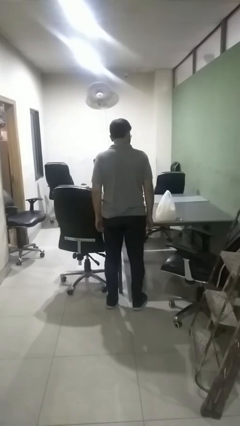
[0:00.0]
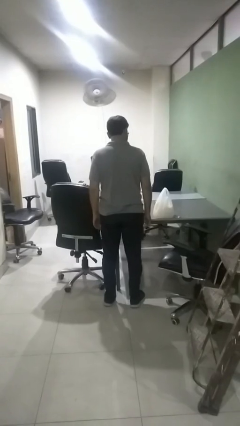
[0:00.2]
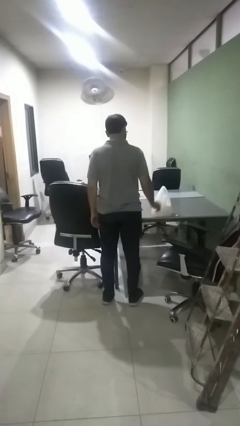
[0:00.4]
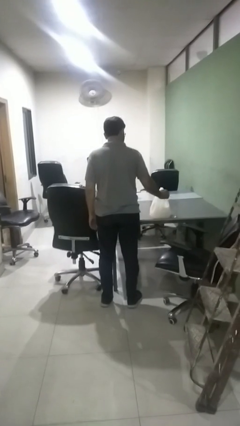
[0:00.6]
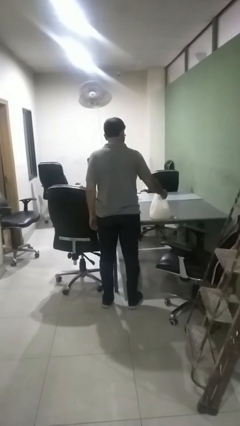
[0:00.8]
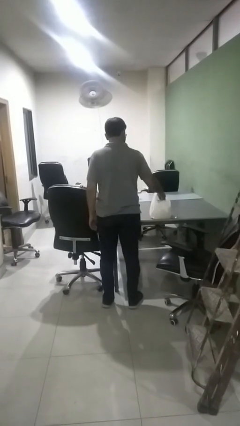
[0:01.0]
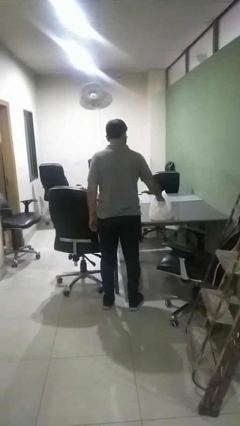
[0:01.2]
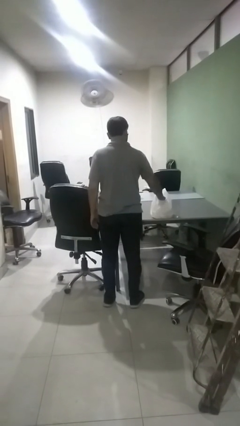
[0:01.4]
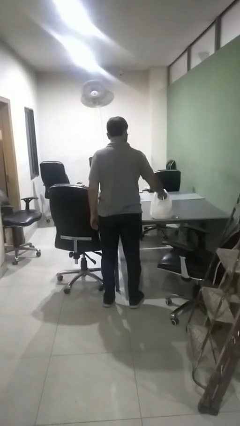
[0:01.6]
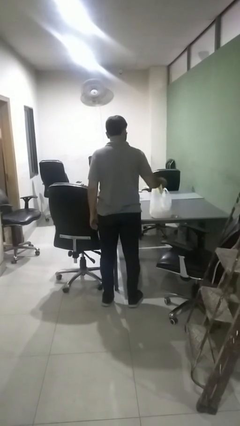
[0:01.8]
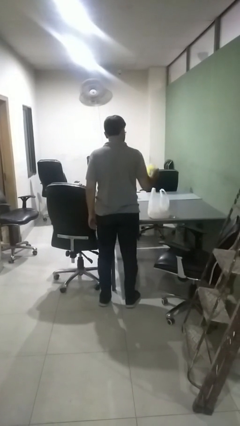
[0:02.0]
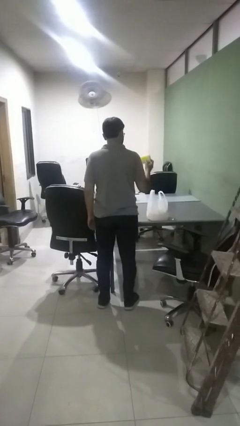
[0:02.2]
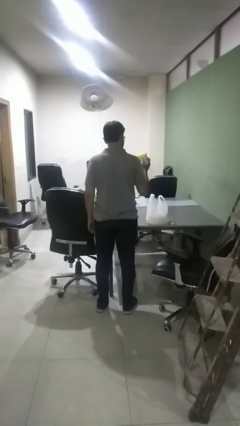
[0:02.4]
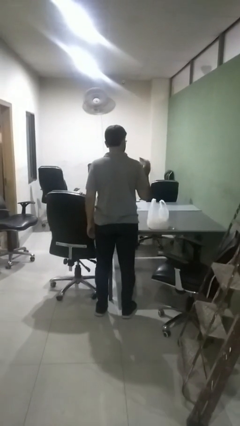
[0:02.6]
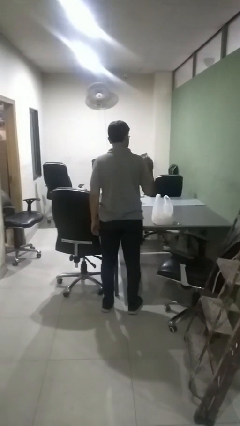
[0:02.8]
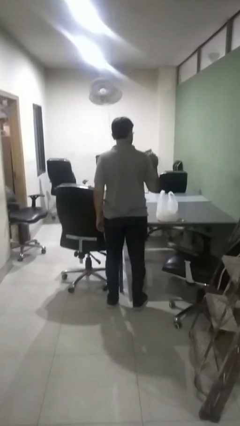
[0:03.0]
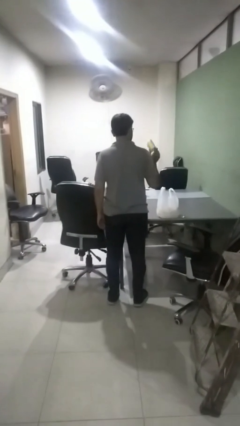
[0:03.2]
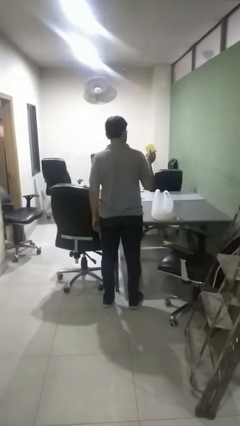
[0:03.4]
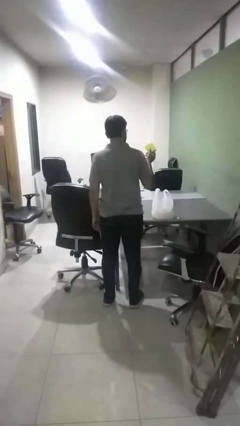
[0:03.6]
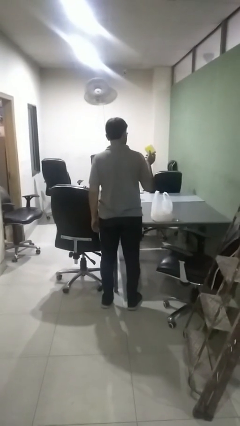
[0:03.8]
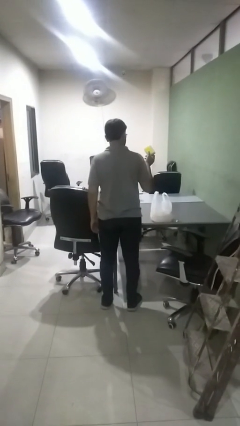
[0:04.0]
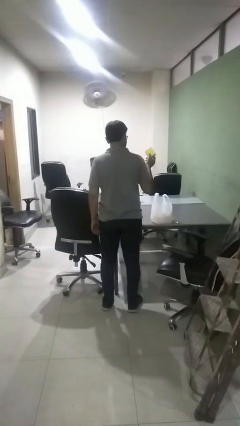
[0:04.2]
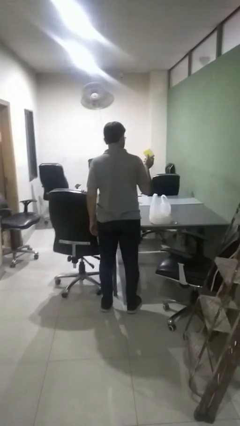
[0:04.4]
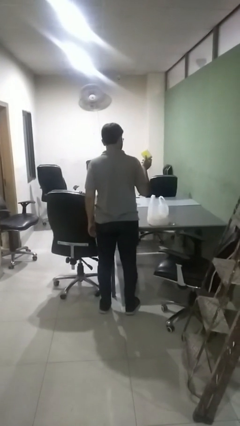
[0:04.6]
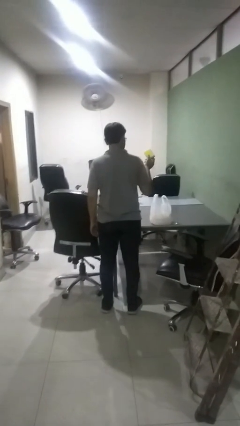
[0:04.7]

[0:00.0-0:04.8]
person takes object from bag

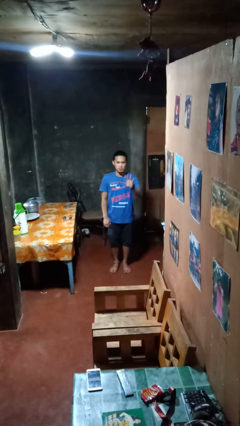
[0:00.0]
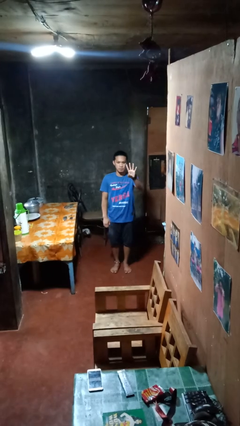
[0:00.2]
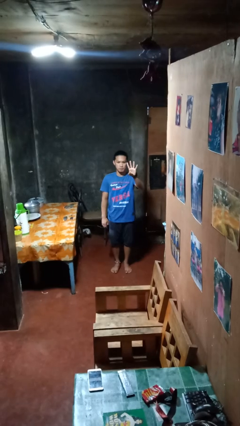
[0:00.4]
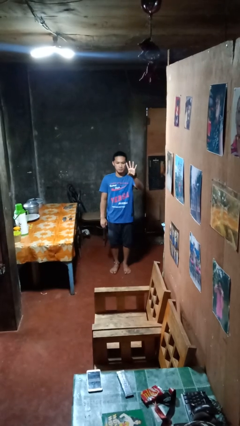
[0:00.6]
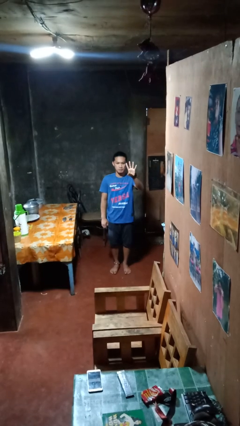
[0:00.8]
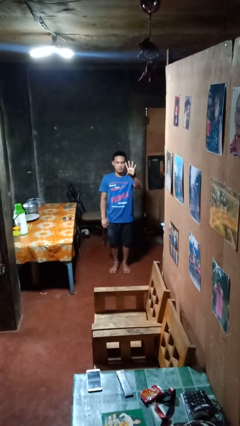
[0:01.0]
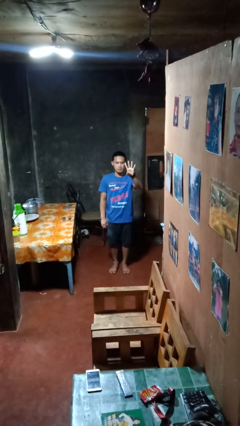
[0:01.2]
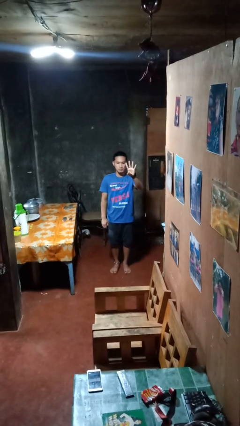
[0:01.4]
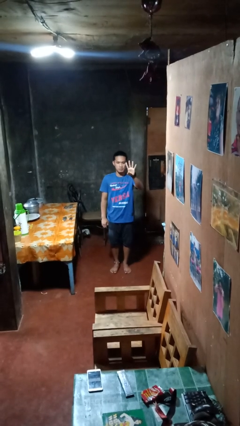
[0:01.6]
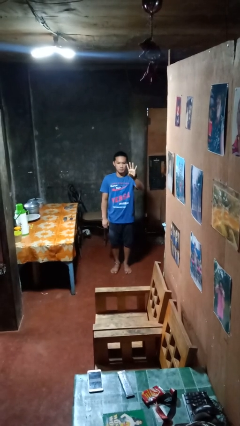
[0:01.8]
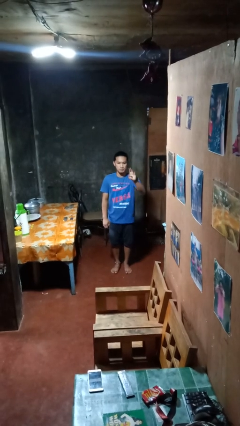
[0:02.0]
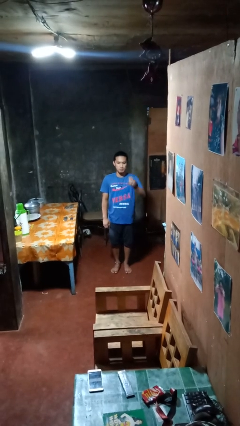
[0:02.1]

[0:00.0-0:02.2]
person gestures number four

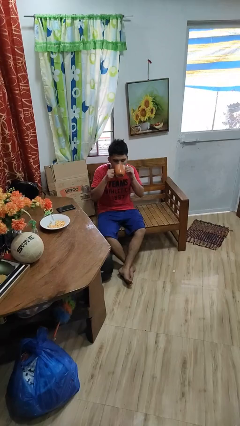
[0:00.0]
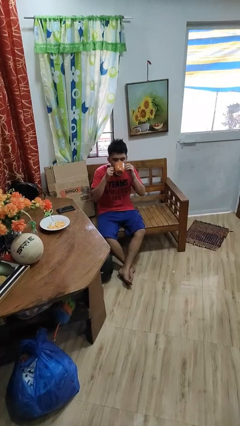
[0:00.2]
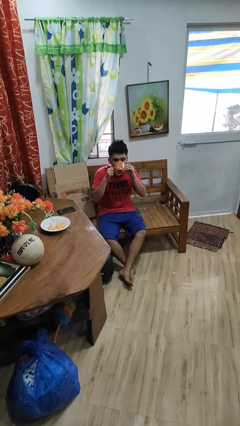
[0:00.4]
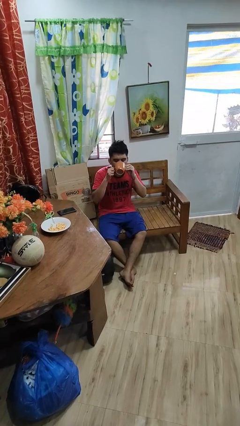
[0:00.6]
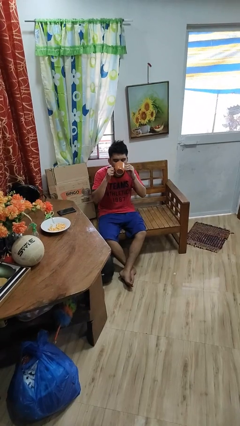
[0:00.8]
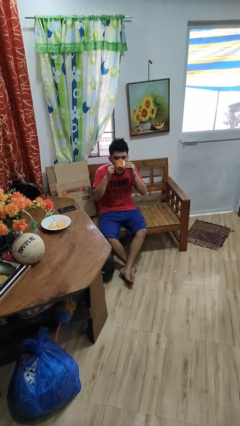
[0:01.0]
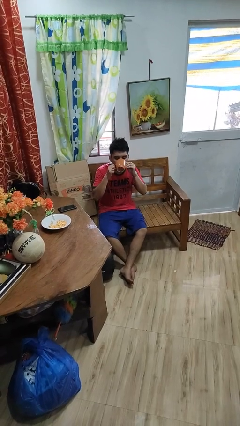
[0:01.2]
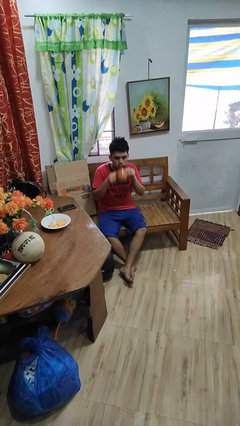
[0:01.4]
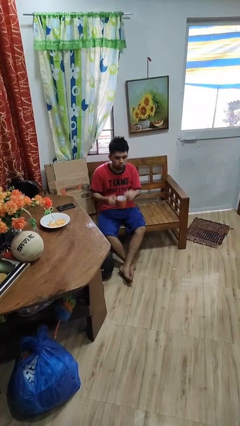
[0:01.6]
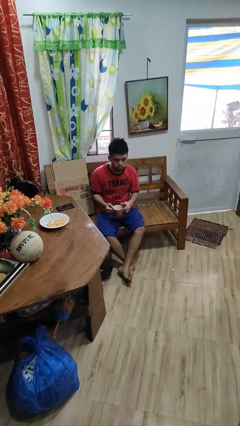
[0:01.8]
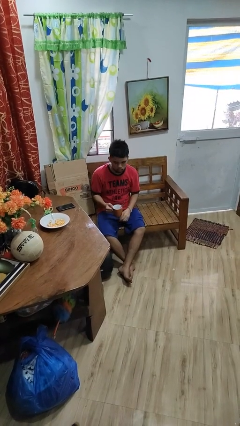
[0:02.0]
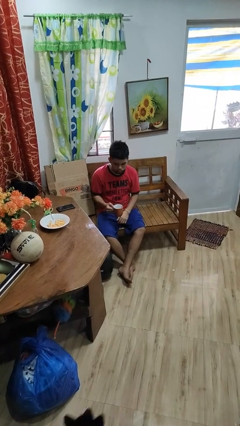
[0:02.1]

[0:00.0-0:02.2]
person drinks from mug

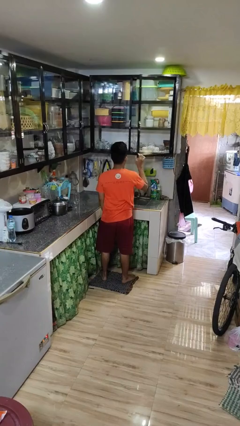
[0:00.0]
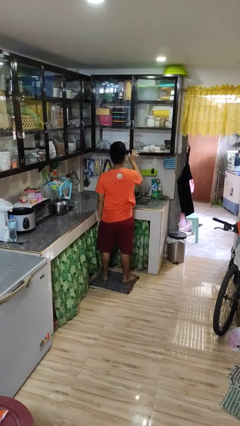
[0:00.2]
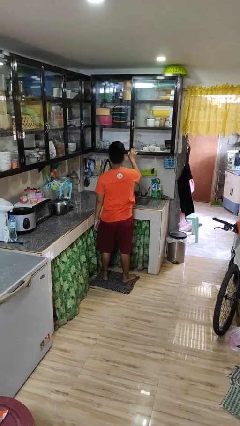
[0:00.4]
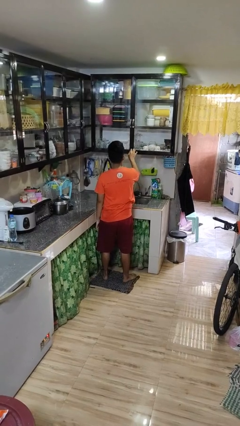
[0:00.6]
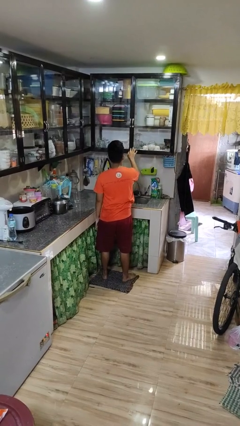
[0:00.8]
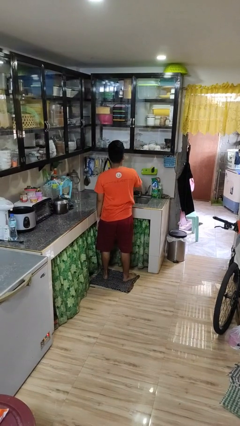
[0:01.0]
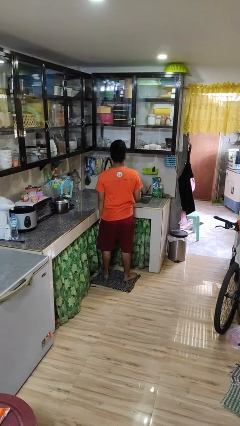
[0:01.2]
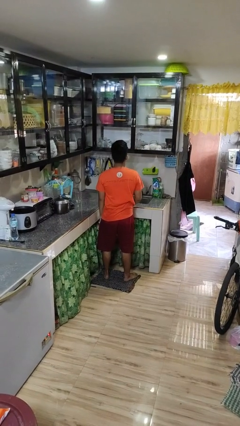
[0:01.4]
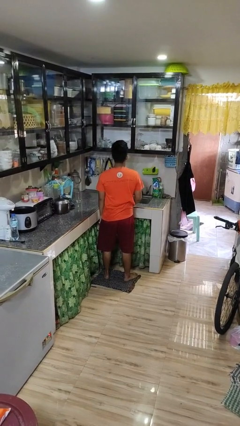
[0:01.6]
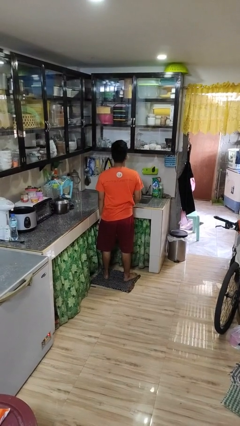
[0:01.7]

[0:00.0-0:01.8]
person closes cabinet

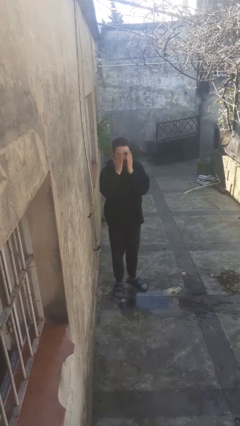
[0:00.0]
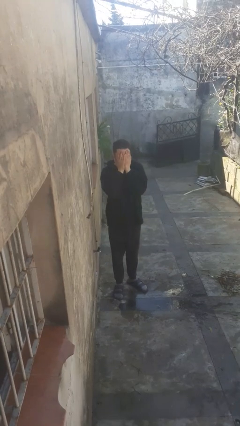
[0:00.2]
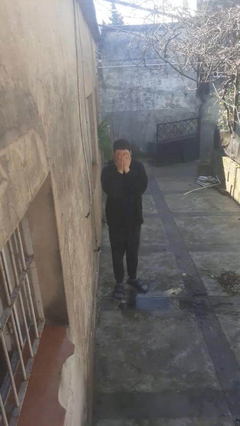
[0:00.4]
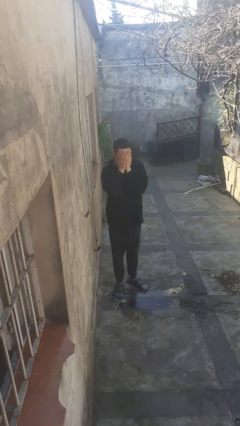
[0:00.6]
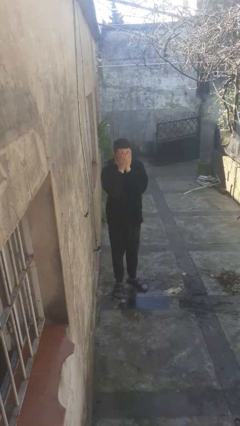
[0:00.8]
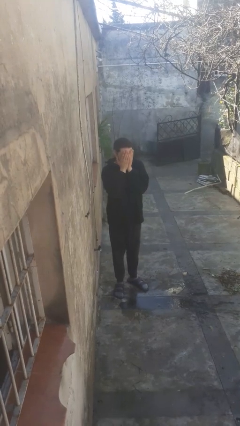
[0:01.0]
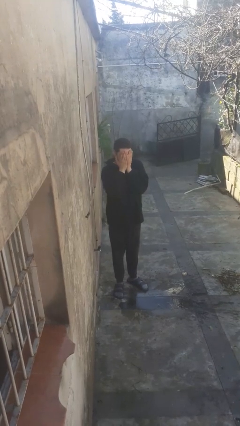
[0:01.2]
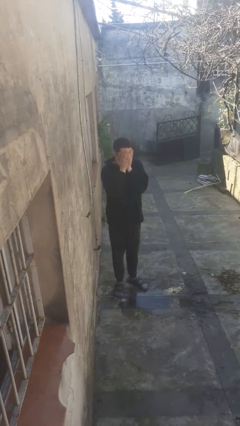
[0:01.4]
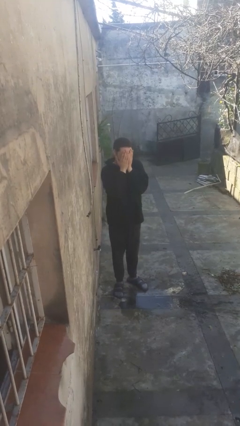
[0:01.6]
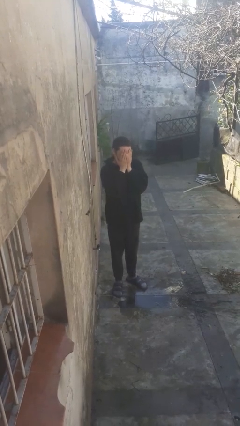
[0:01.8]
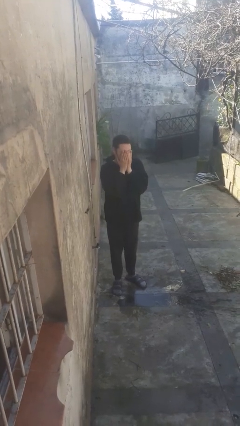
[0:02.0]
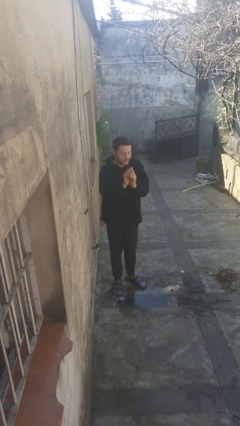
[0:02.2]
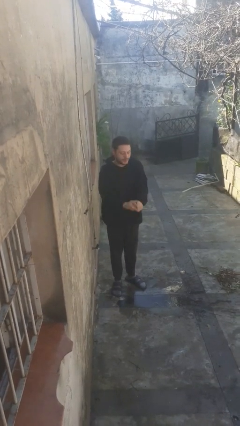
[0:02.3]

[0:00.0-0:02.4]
person covers face with hands

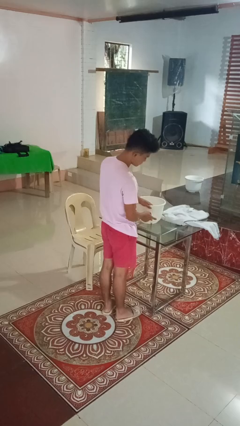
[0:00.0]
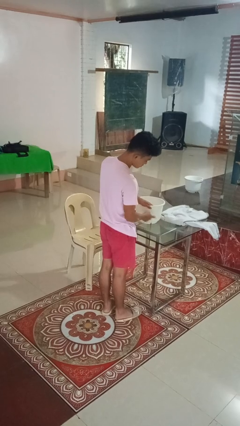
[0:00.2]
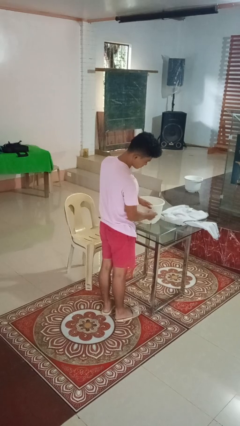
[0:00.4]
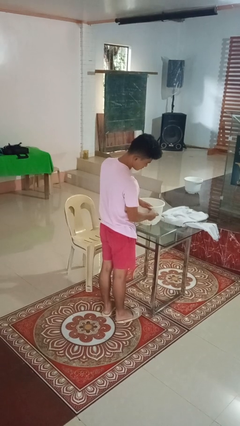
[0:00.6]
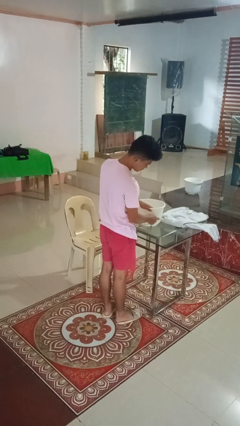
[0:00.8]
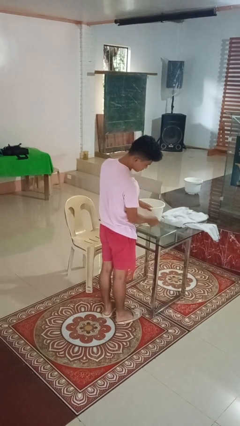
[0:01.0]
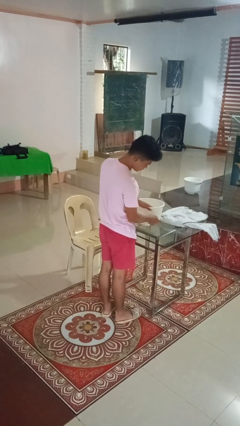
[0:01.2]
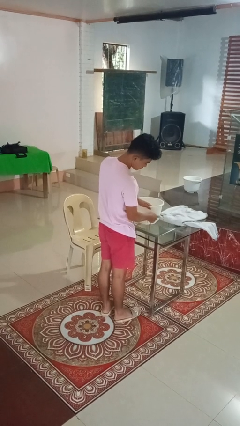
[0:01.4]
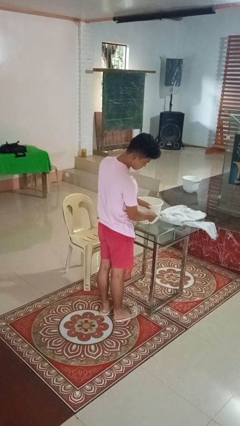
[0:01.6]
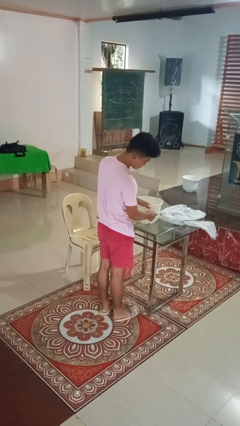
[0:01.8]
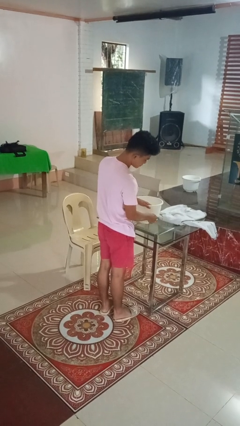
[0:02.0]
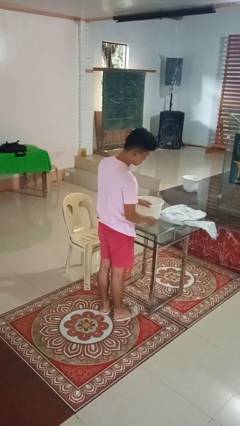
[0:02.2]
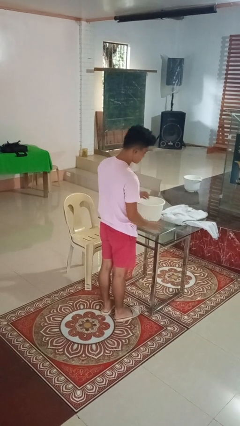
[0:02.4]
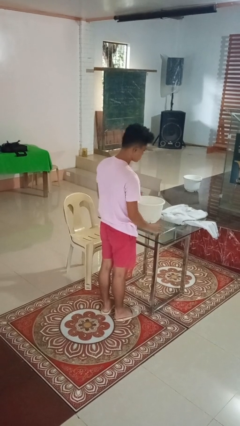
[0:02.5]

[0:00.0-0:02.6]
person taps object with finger

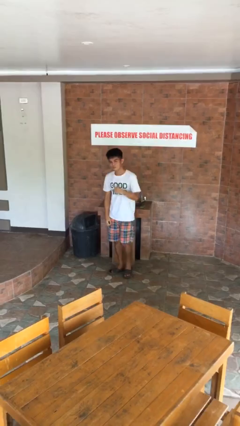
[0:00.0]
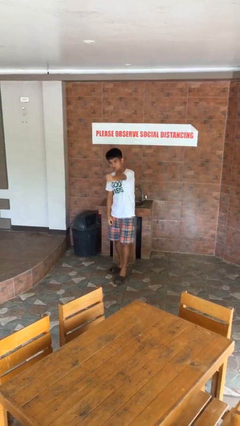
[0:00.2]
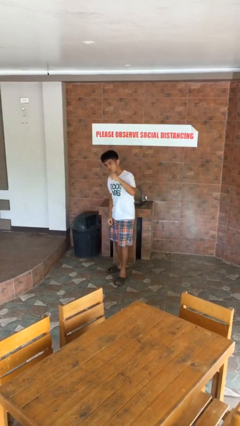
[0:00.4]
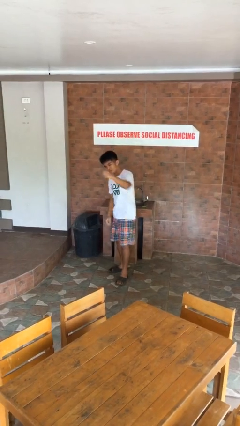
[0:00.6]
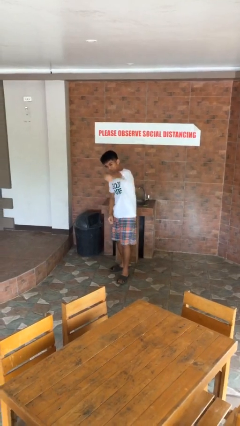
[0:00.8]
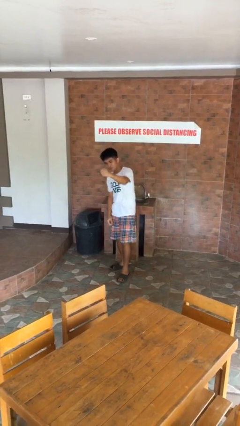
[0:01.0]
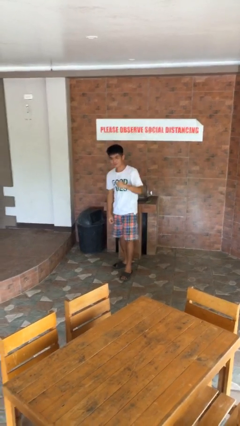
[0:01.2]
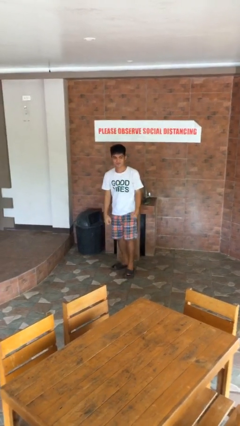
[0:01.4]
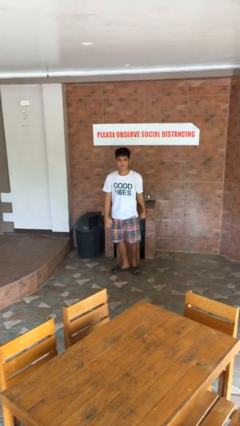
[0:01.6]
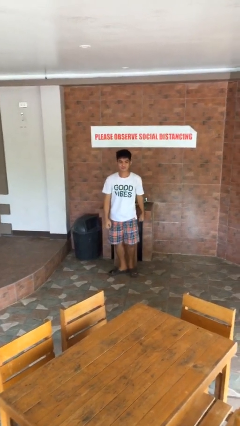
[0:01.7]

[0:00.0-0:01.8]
person punches
